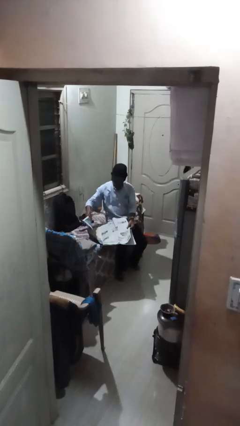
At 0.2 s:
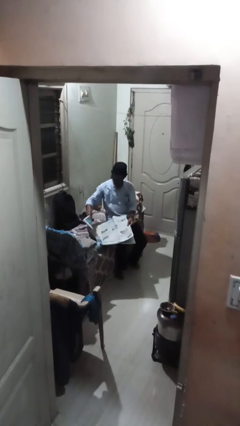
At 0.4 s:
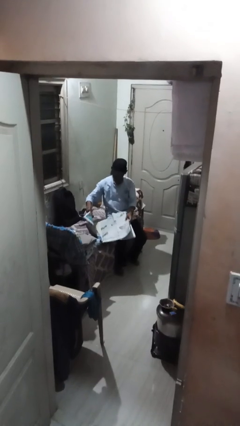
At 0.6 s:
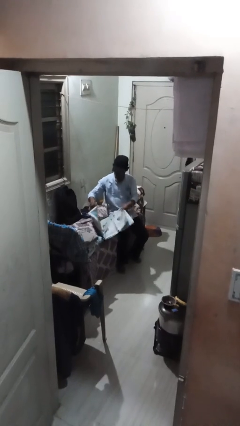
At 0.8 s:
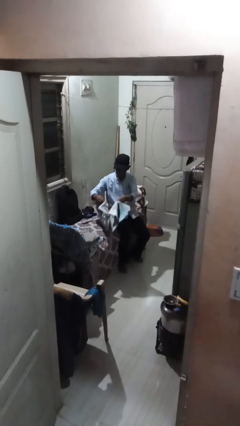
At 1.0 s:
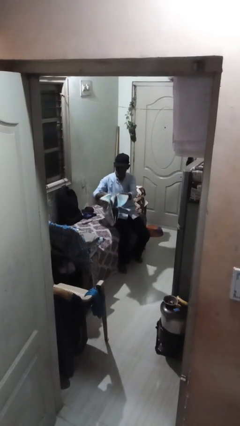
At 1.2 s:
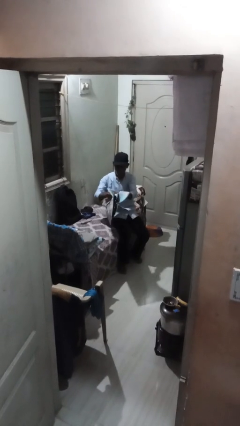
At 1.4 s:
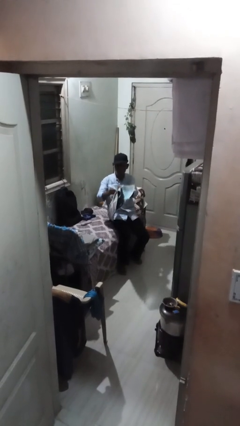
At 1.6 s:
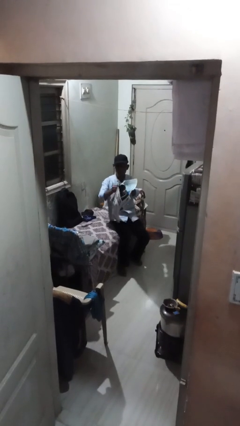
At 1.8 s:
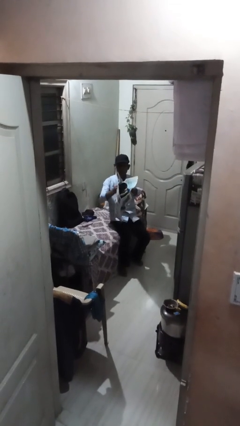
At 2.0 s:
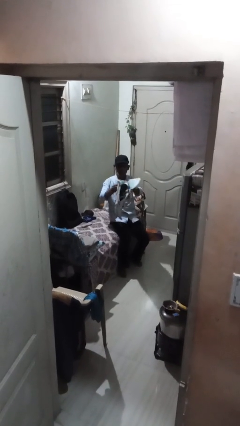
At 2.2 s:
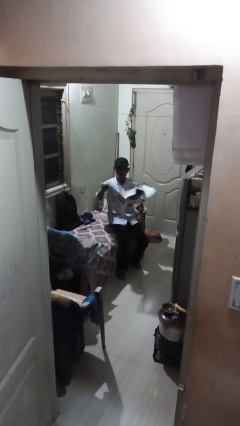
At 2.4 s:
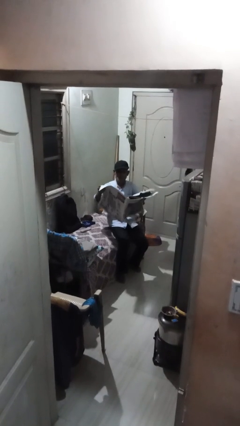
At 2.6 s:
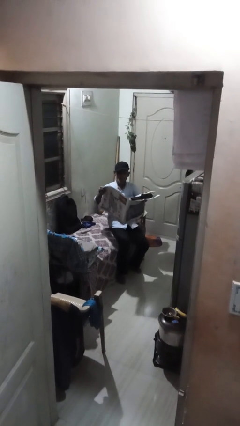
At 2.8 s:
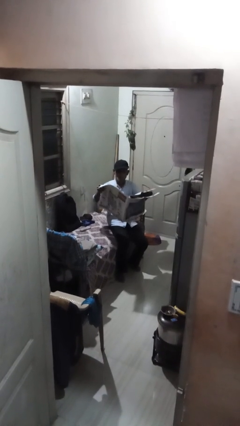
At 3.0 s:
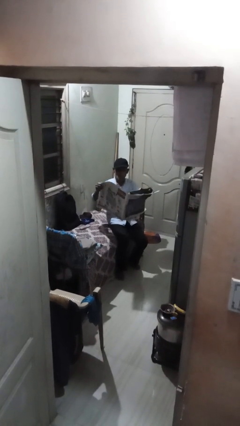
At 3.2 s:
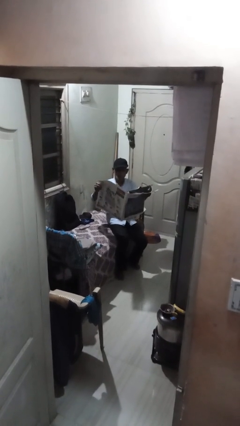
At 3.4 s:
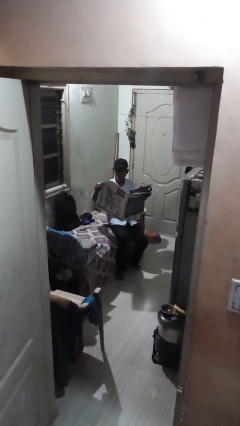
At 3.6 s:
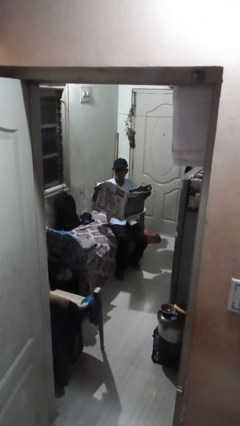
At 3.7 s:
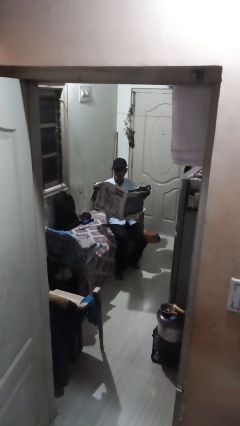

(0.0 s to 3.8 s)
person reads newspaper

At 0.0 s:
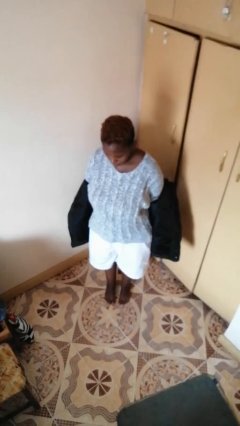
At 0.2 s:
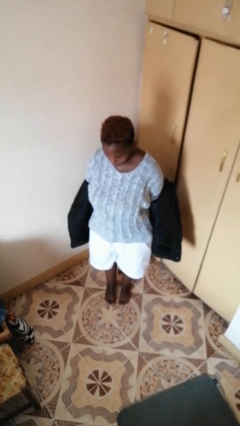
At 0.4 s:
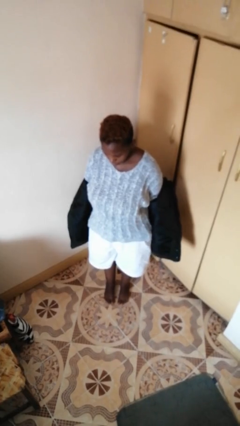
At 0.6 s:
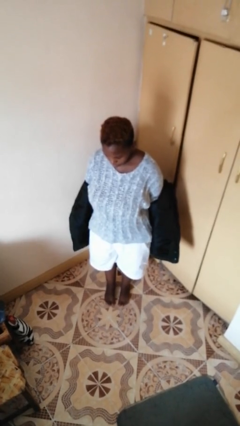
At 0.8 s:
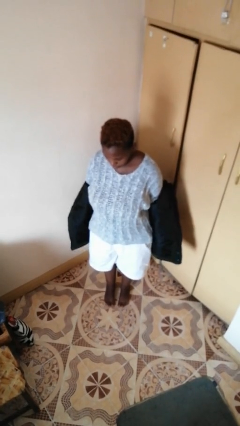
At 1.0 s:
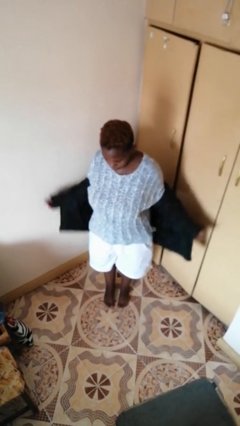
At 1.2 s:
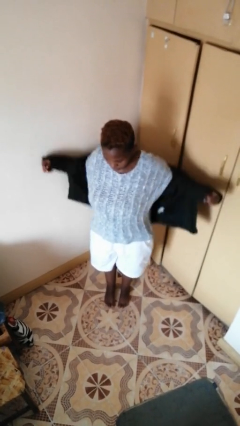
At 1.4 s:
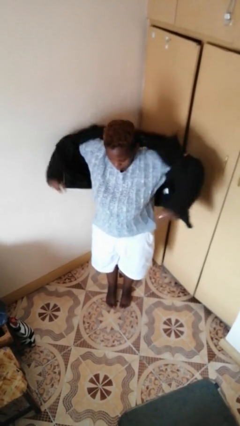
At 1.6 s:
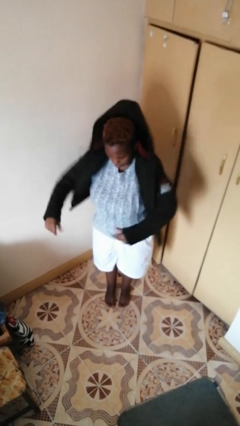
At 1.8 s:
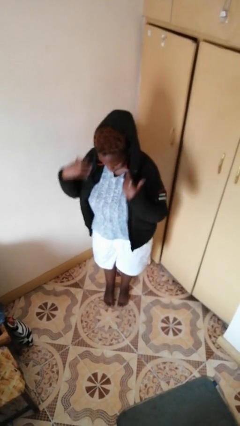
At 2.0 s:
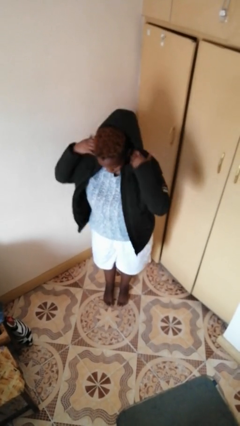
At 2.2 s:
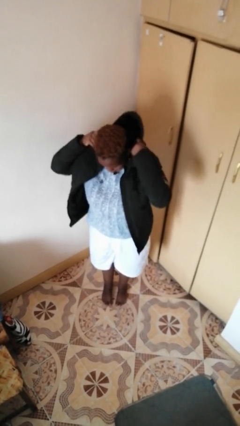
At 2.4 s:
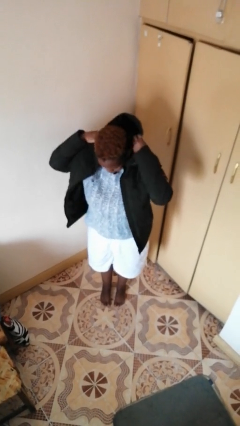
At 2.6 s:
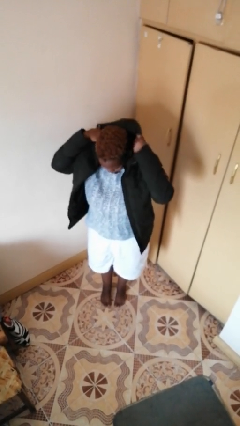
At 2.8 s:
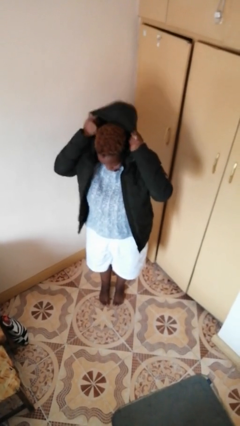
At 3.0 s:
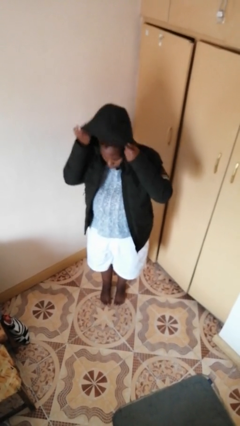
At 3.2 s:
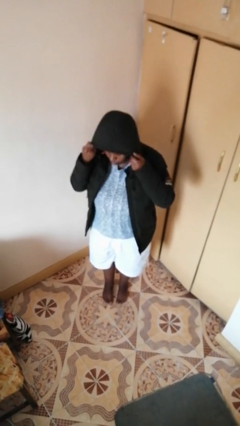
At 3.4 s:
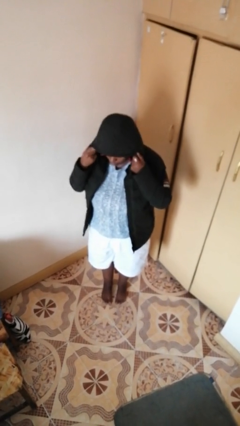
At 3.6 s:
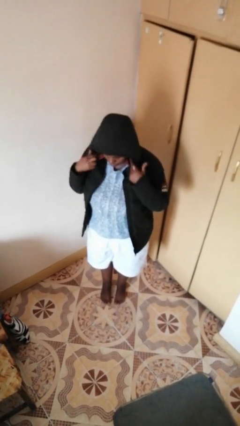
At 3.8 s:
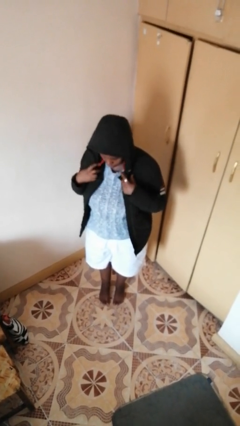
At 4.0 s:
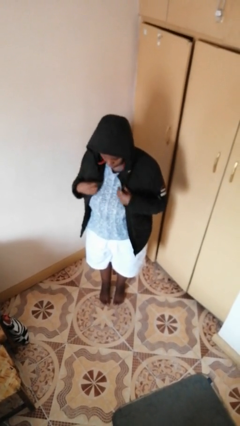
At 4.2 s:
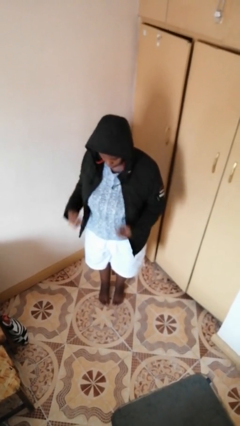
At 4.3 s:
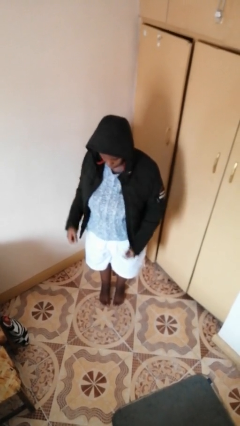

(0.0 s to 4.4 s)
person puts on hoodie

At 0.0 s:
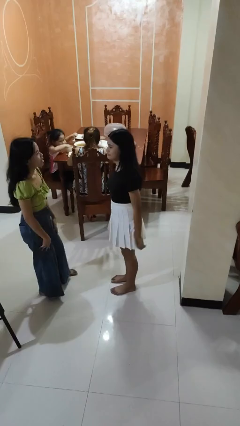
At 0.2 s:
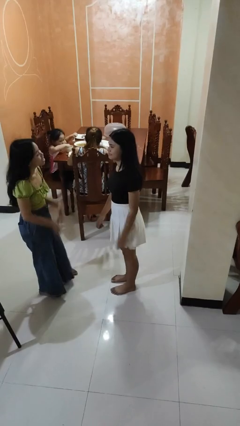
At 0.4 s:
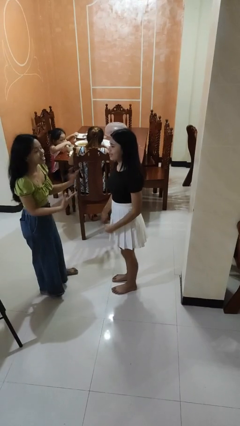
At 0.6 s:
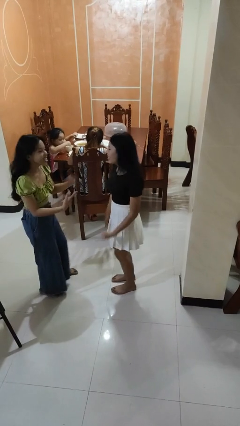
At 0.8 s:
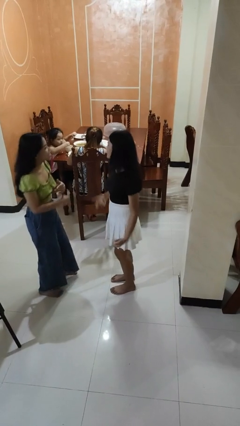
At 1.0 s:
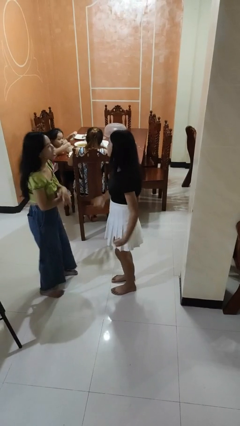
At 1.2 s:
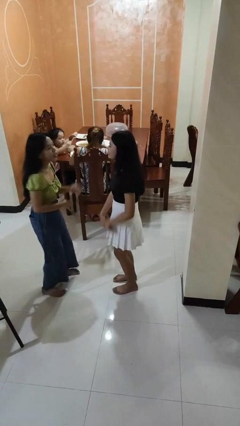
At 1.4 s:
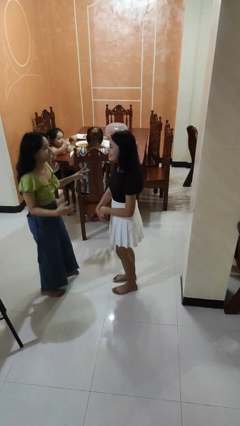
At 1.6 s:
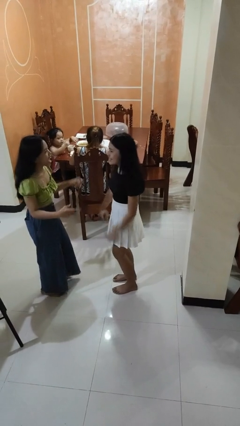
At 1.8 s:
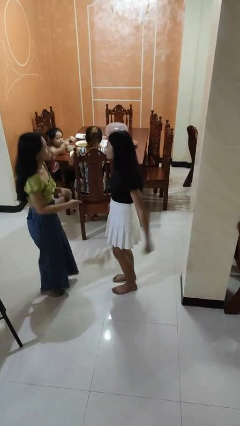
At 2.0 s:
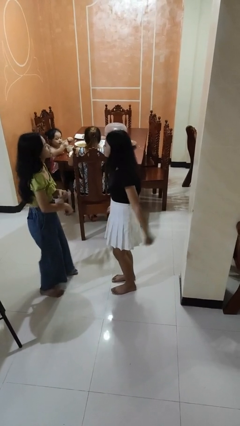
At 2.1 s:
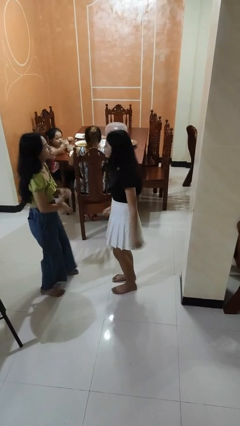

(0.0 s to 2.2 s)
person talks to person

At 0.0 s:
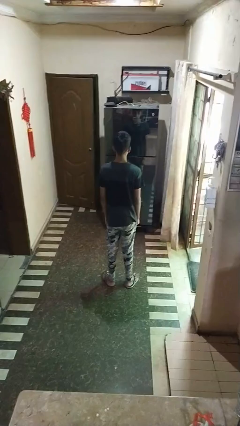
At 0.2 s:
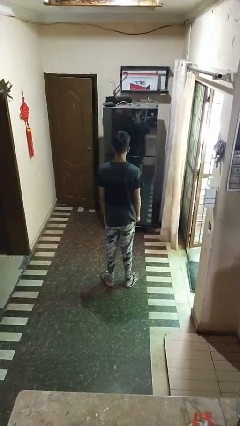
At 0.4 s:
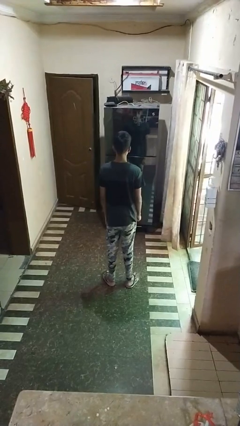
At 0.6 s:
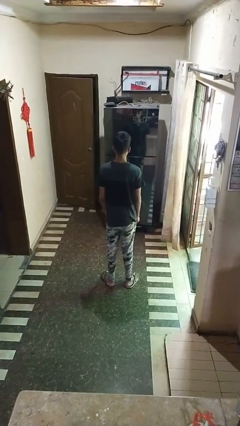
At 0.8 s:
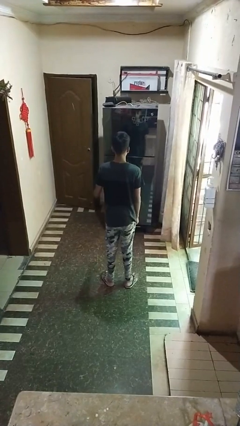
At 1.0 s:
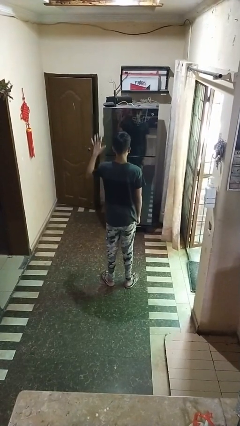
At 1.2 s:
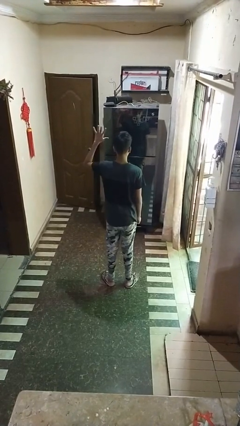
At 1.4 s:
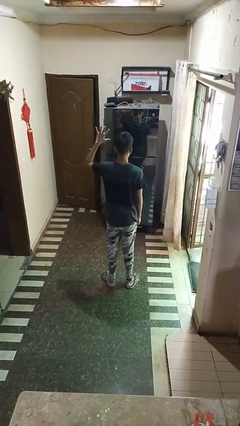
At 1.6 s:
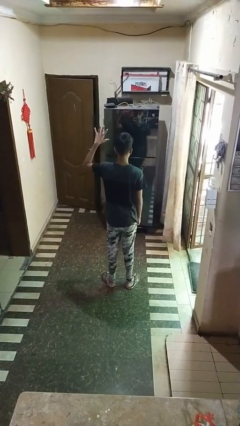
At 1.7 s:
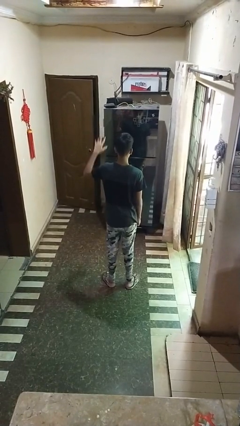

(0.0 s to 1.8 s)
person gestures number five

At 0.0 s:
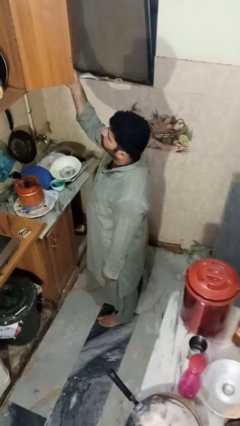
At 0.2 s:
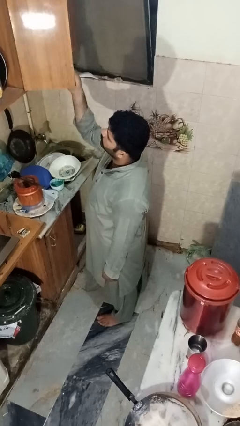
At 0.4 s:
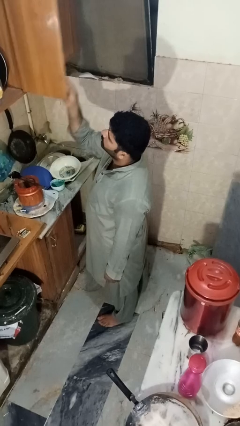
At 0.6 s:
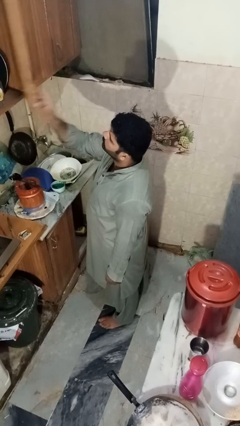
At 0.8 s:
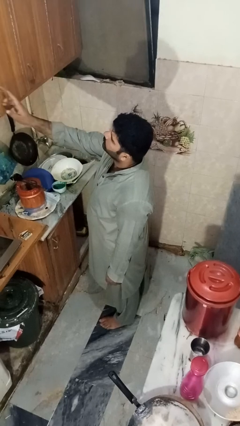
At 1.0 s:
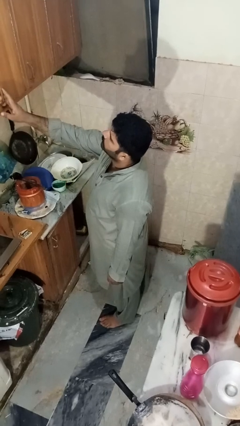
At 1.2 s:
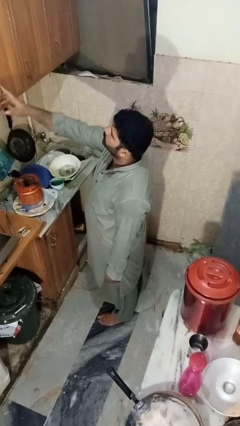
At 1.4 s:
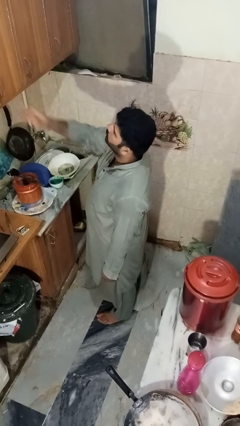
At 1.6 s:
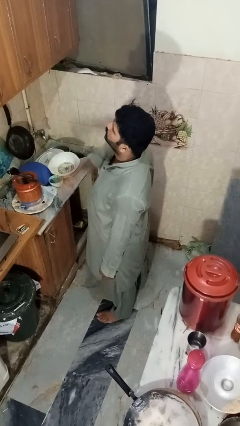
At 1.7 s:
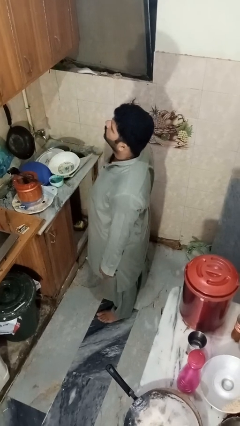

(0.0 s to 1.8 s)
person closes cabinet

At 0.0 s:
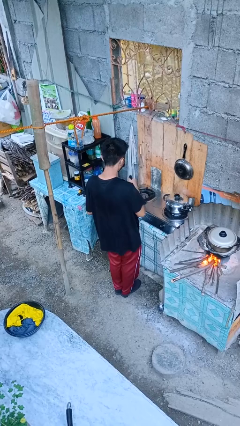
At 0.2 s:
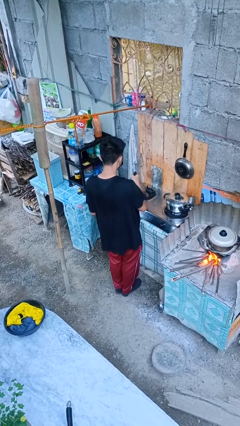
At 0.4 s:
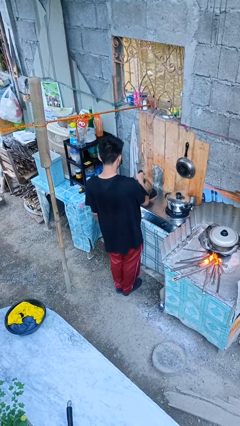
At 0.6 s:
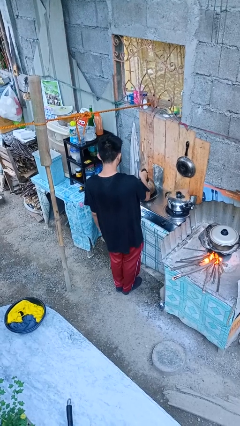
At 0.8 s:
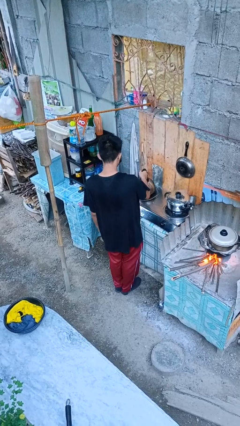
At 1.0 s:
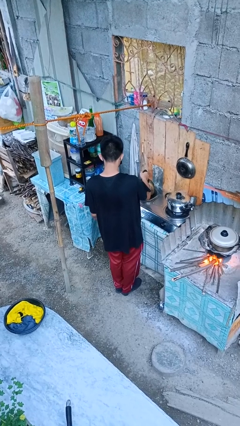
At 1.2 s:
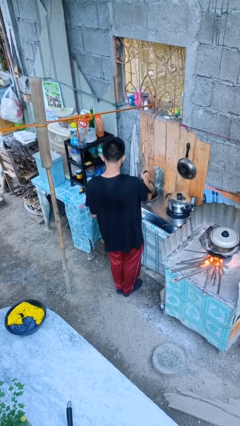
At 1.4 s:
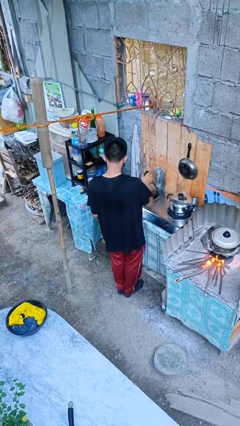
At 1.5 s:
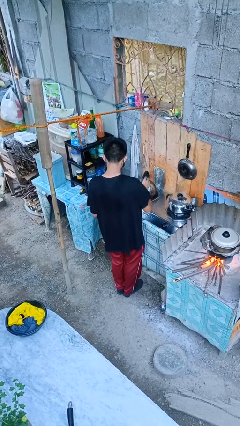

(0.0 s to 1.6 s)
person puts down object on countertop

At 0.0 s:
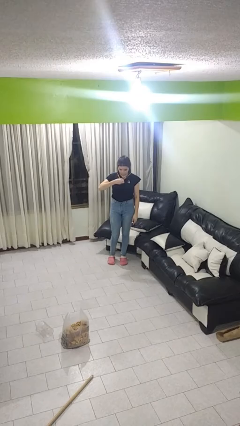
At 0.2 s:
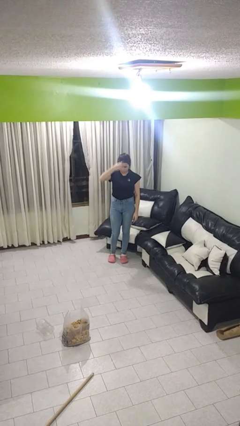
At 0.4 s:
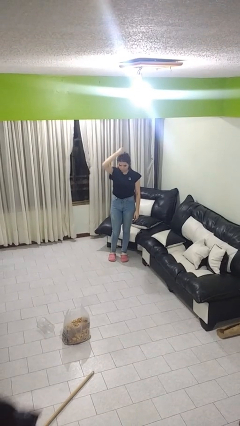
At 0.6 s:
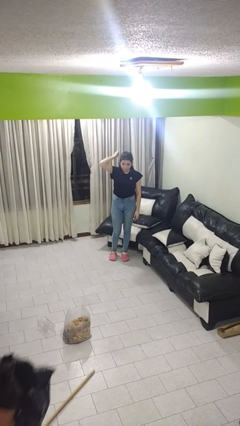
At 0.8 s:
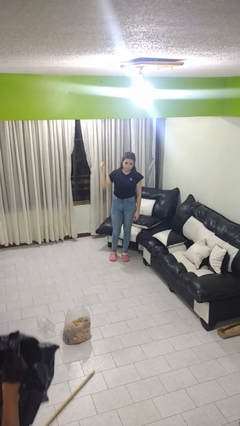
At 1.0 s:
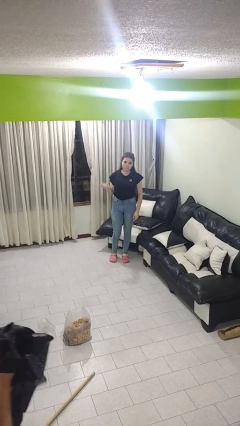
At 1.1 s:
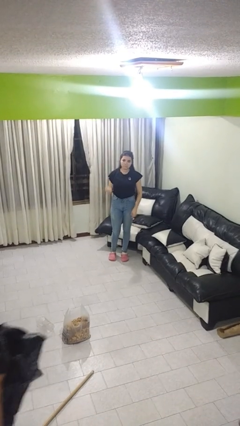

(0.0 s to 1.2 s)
person takes off necklace

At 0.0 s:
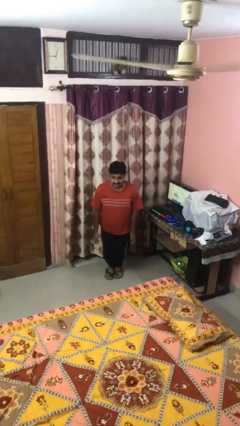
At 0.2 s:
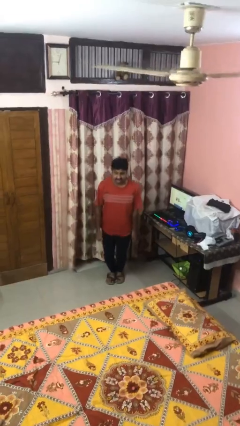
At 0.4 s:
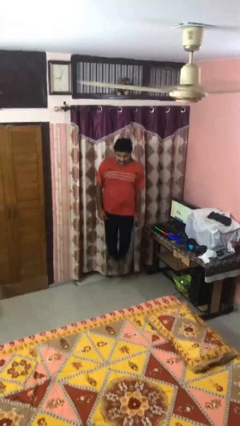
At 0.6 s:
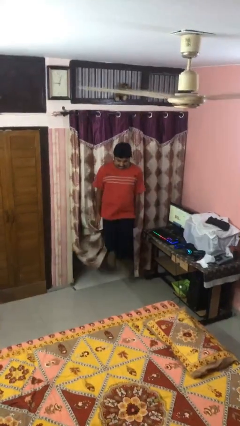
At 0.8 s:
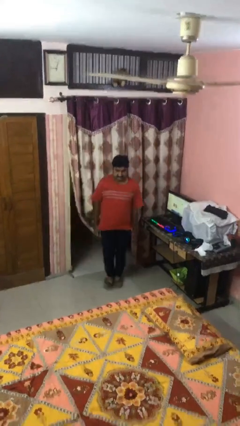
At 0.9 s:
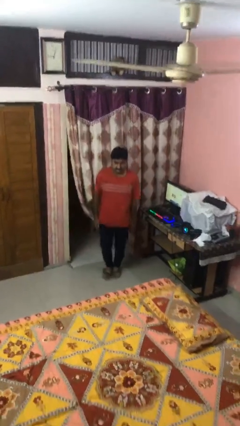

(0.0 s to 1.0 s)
person jumps
